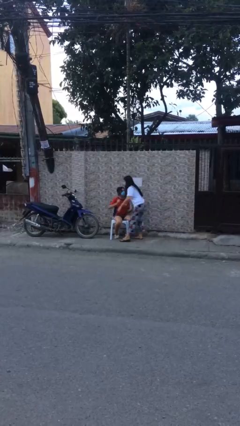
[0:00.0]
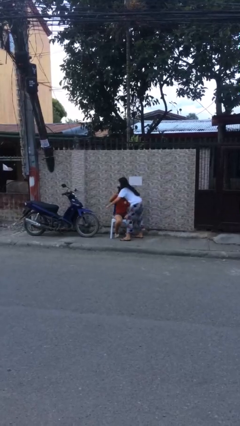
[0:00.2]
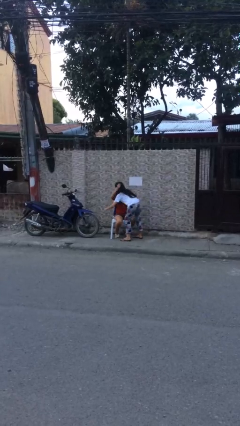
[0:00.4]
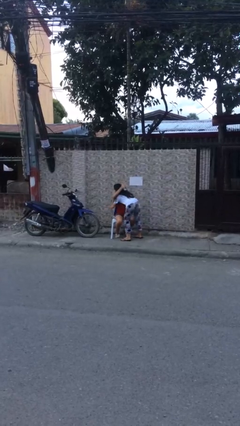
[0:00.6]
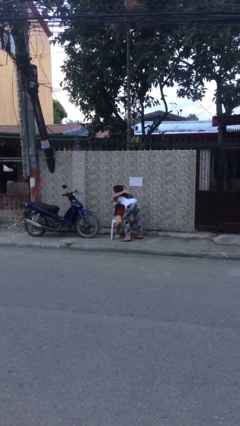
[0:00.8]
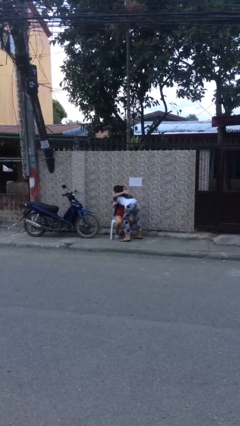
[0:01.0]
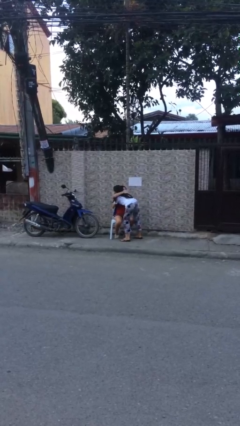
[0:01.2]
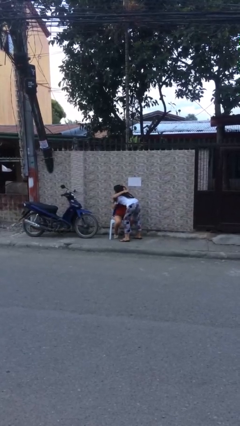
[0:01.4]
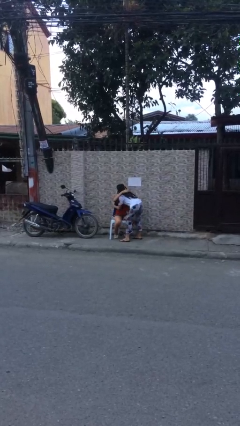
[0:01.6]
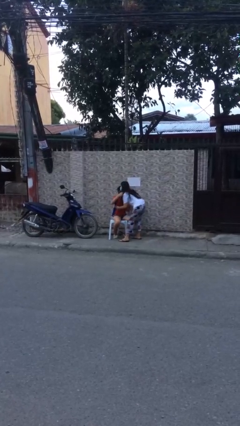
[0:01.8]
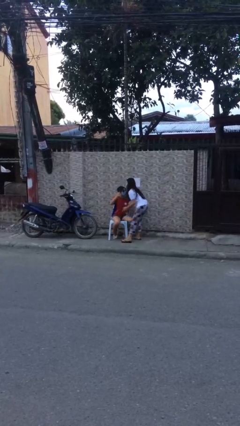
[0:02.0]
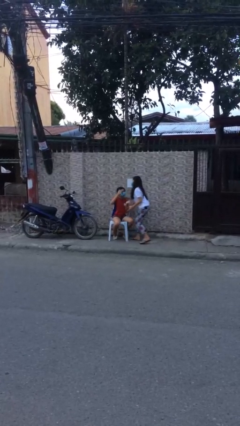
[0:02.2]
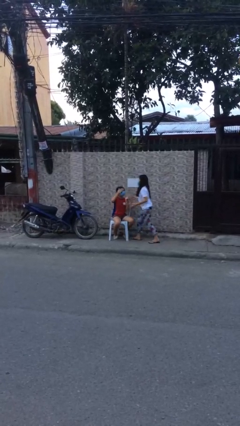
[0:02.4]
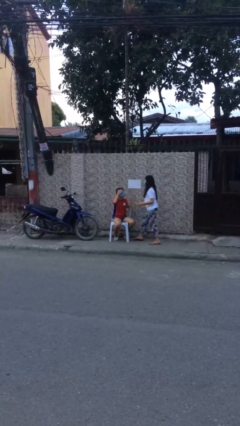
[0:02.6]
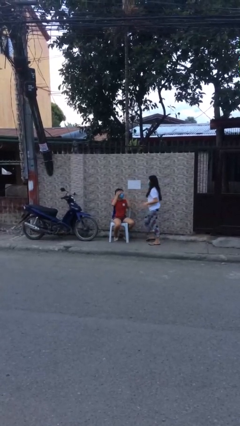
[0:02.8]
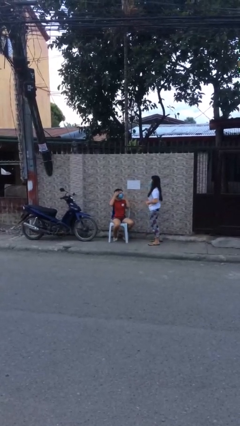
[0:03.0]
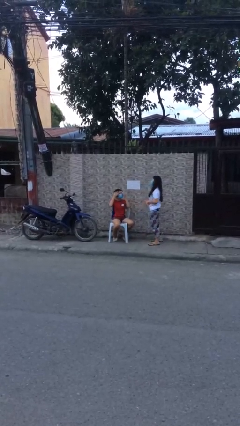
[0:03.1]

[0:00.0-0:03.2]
person embraces person

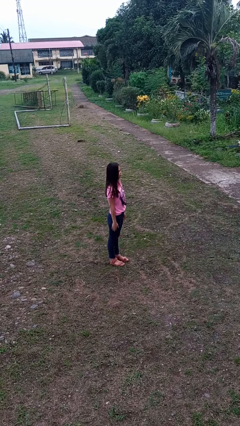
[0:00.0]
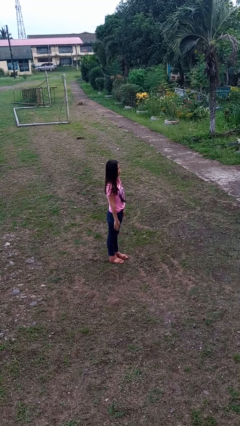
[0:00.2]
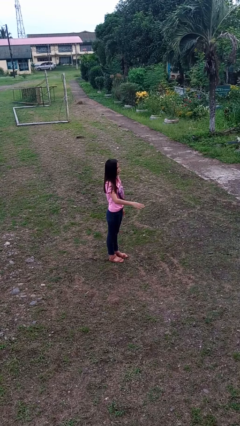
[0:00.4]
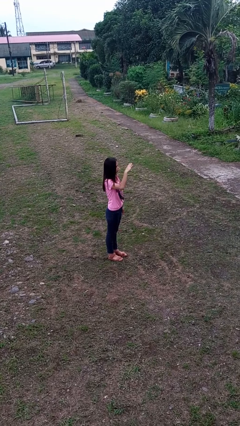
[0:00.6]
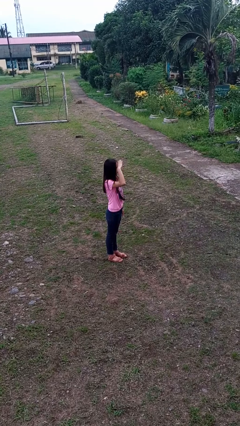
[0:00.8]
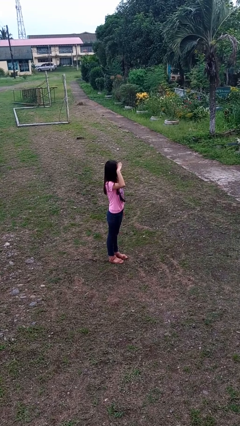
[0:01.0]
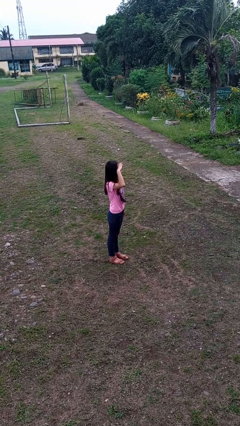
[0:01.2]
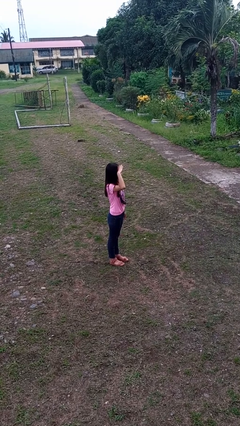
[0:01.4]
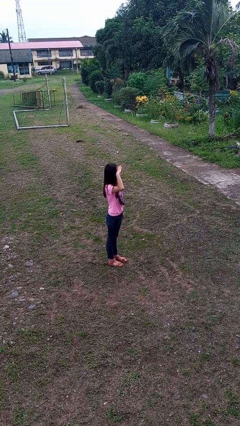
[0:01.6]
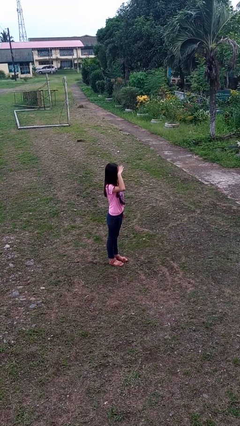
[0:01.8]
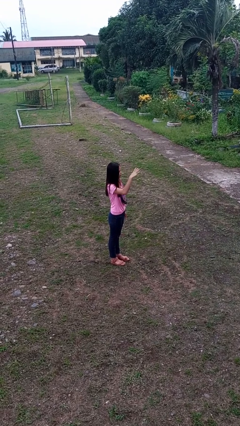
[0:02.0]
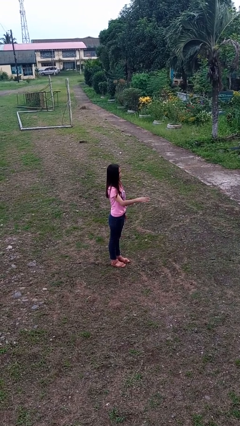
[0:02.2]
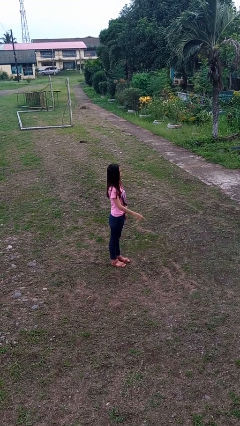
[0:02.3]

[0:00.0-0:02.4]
person salutes

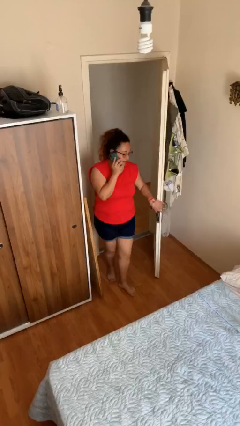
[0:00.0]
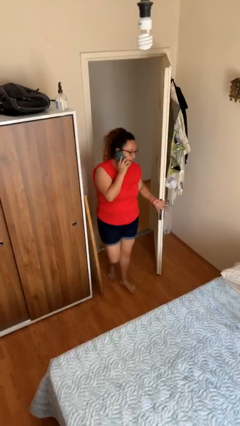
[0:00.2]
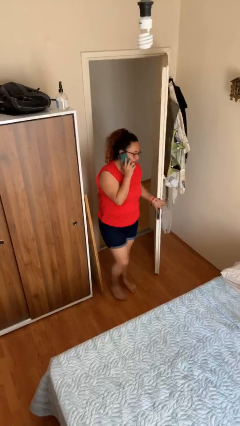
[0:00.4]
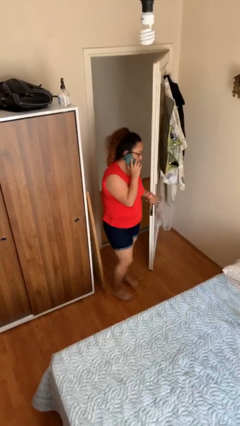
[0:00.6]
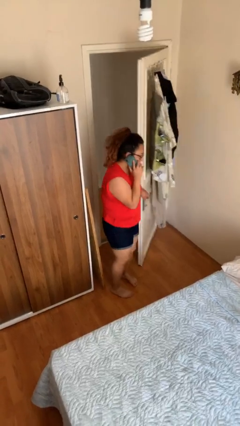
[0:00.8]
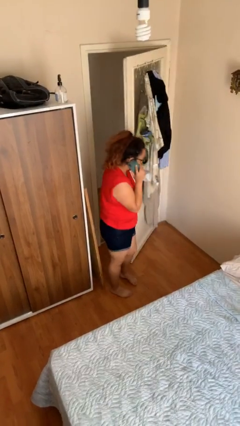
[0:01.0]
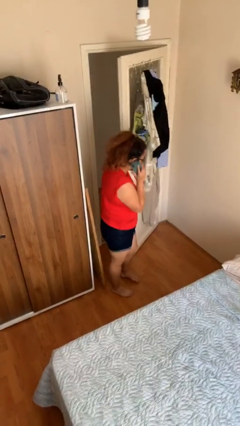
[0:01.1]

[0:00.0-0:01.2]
person enters scene through structure

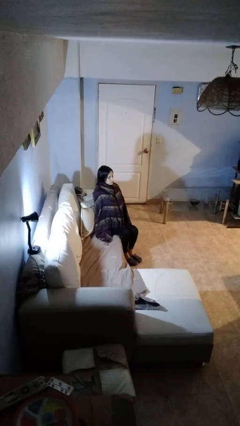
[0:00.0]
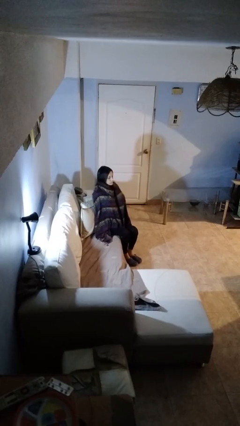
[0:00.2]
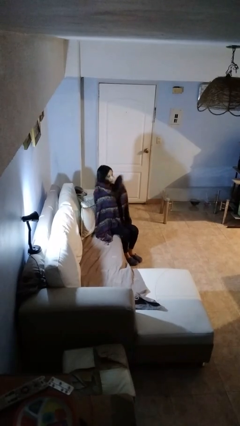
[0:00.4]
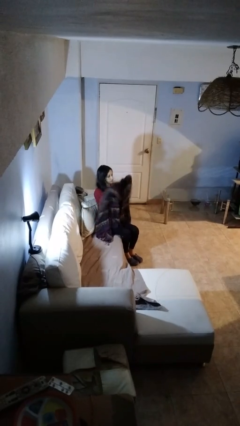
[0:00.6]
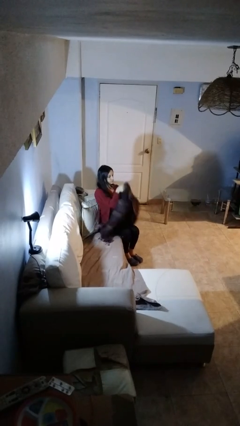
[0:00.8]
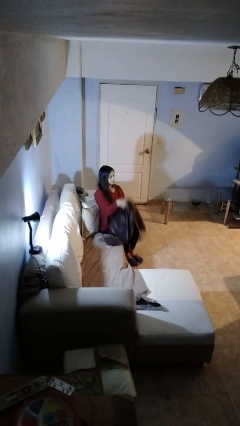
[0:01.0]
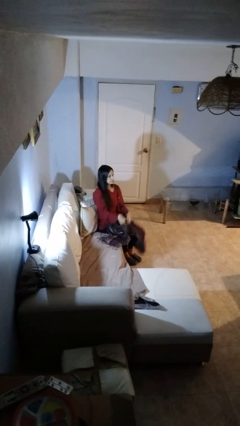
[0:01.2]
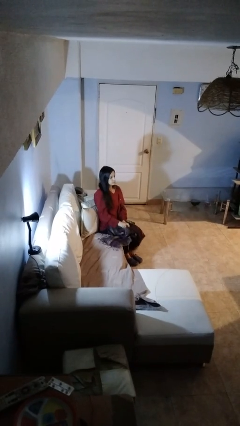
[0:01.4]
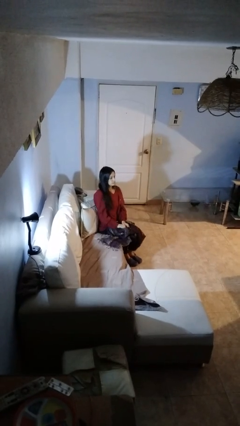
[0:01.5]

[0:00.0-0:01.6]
person uncovers with blanket

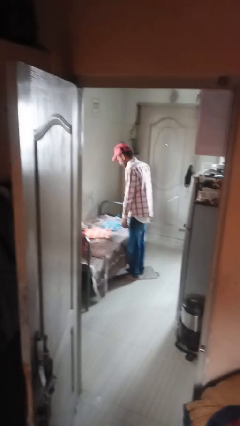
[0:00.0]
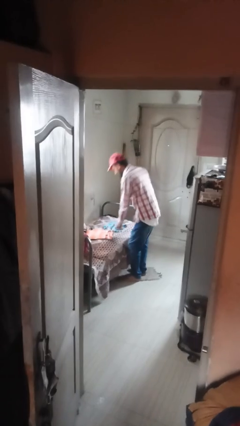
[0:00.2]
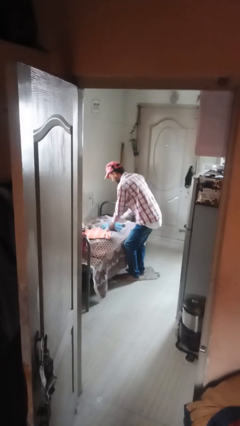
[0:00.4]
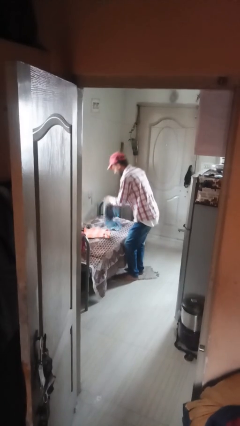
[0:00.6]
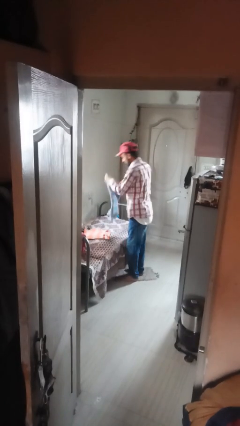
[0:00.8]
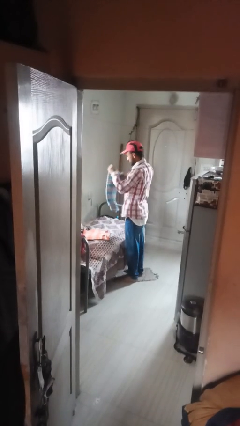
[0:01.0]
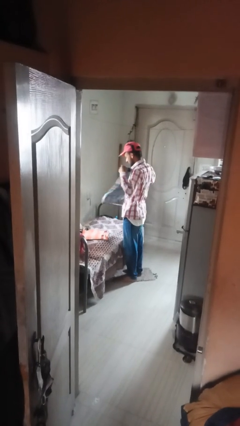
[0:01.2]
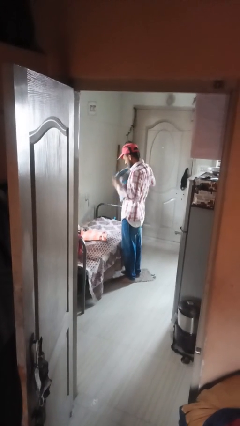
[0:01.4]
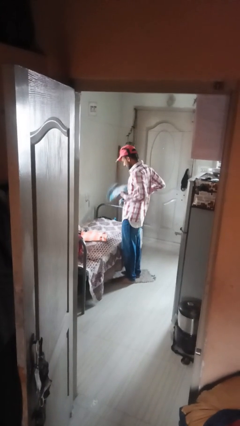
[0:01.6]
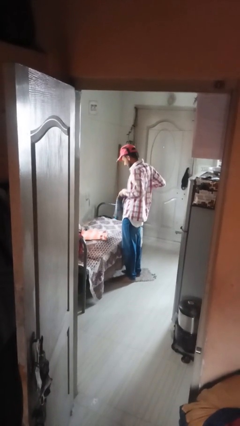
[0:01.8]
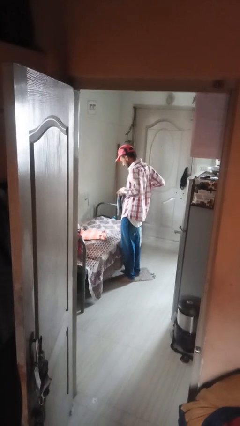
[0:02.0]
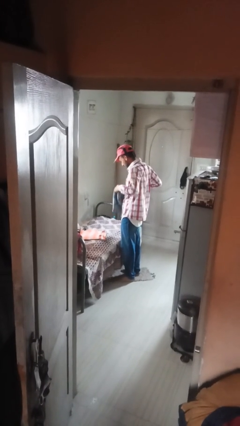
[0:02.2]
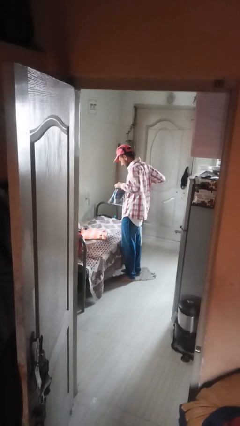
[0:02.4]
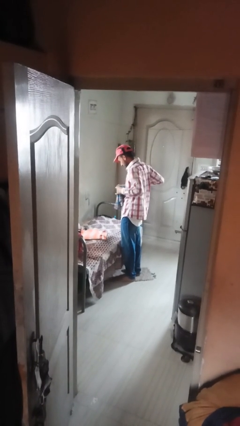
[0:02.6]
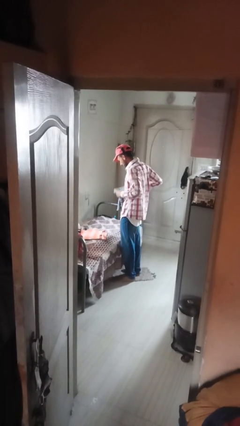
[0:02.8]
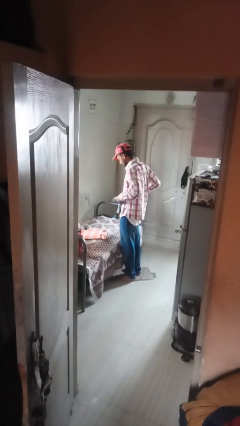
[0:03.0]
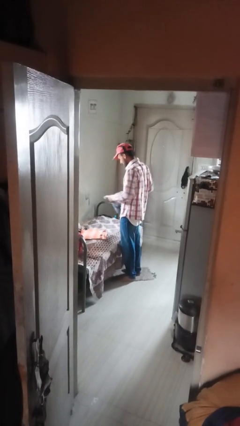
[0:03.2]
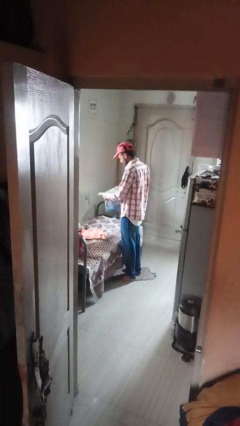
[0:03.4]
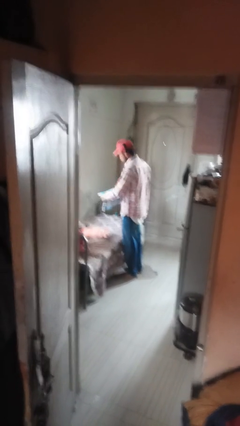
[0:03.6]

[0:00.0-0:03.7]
person folds towel

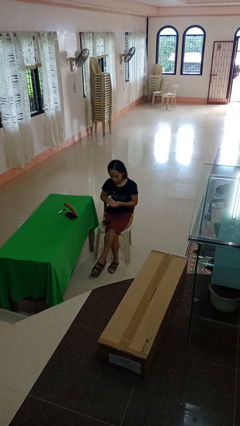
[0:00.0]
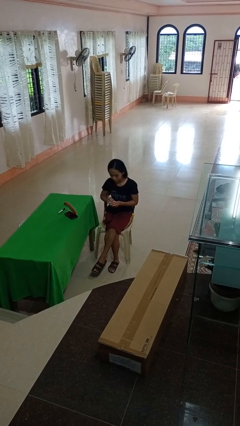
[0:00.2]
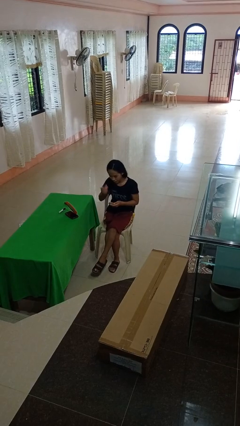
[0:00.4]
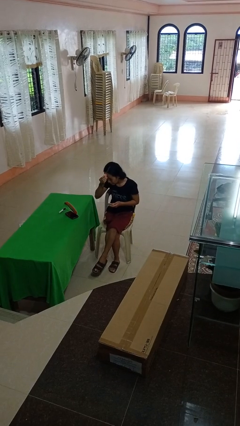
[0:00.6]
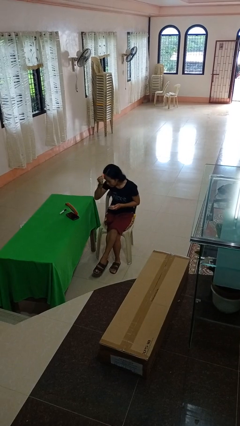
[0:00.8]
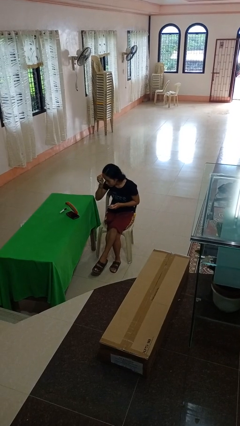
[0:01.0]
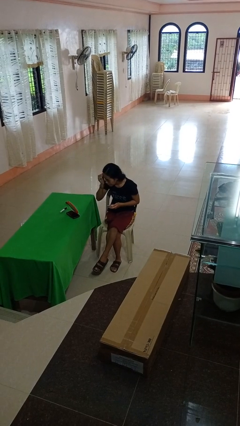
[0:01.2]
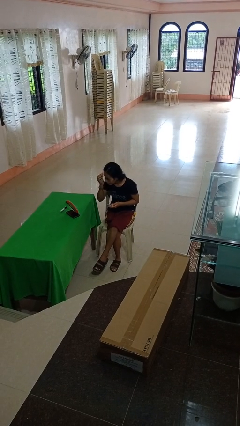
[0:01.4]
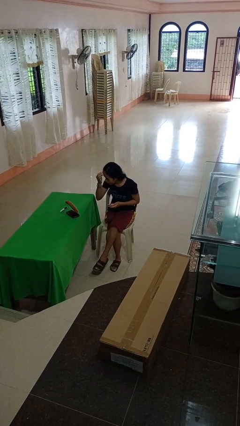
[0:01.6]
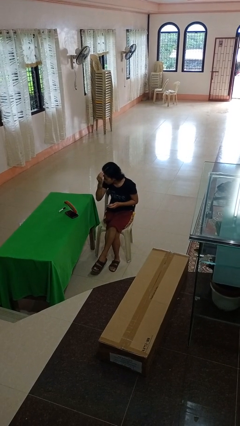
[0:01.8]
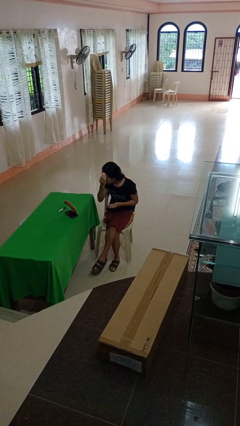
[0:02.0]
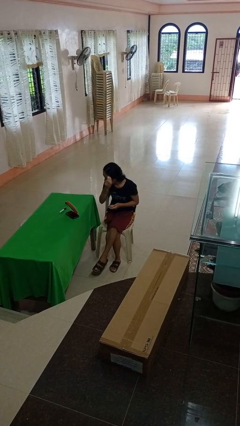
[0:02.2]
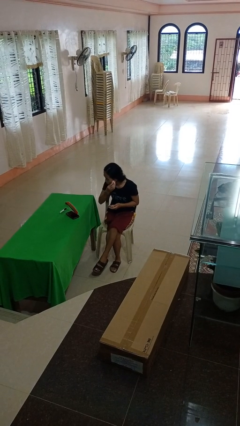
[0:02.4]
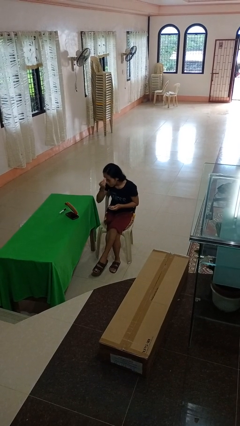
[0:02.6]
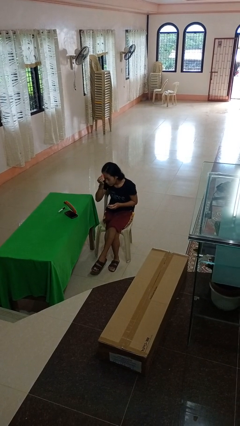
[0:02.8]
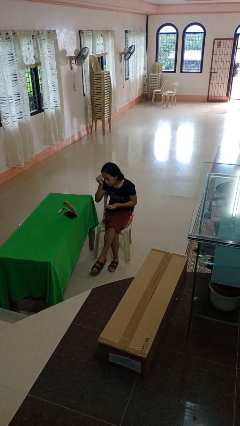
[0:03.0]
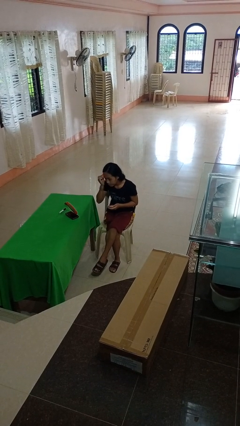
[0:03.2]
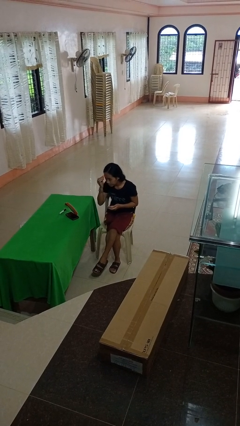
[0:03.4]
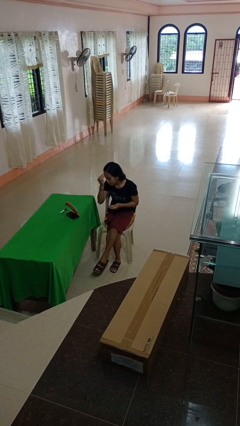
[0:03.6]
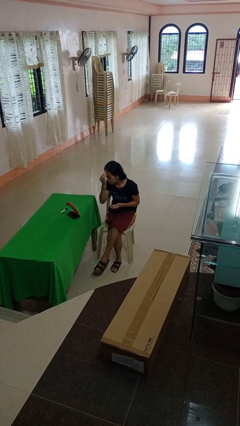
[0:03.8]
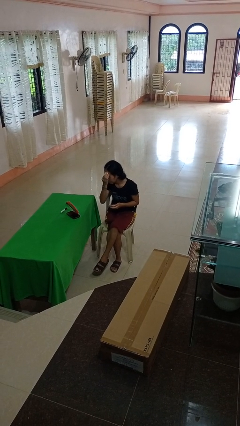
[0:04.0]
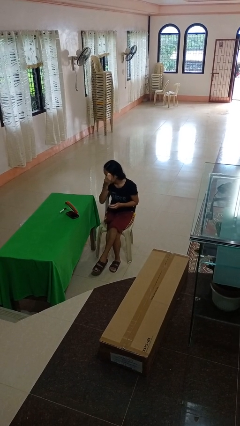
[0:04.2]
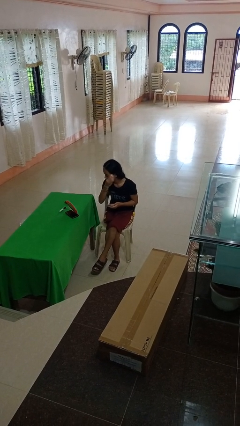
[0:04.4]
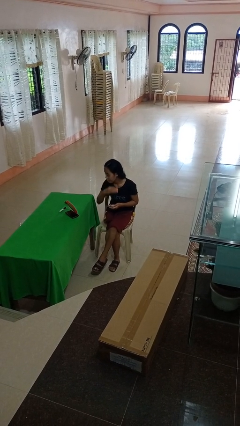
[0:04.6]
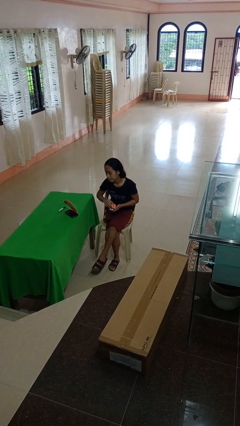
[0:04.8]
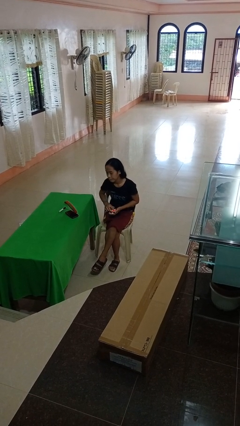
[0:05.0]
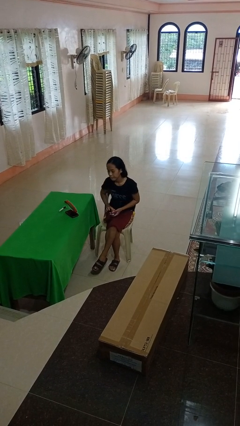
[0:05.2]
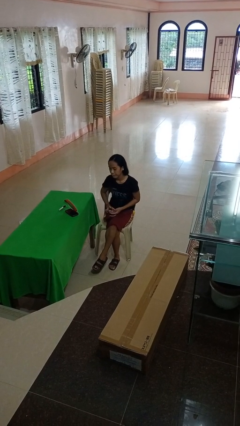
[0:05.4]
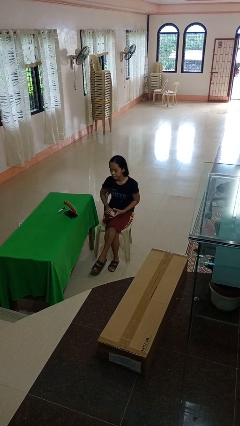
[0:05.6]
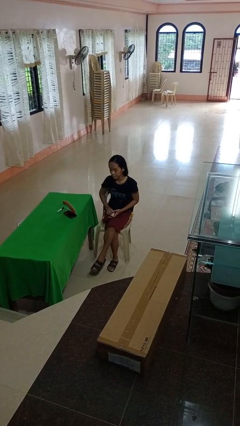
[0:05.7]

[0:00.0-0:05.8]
person applies foundation makeup
